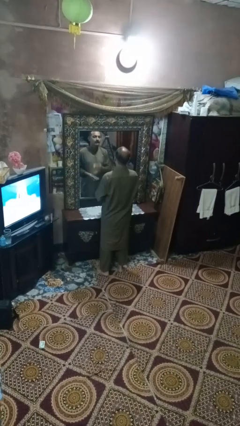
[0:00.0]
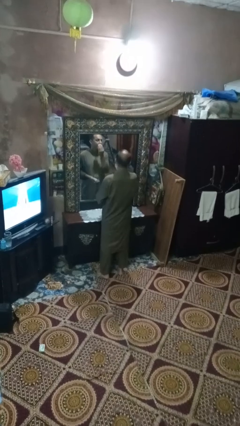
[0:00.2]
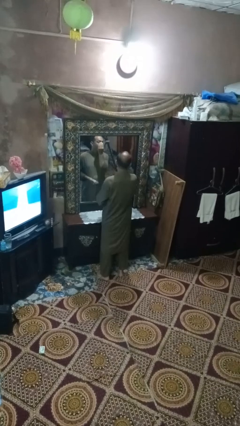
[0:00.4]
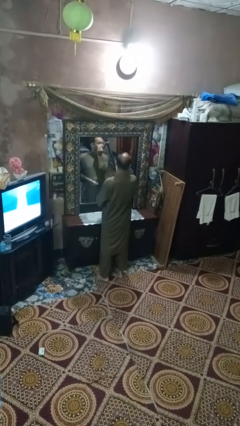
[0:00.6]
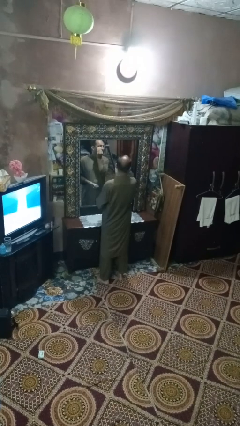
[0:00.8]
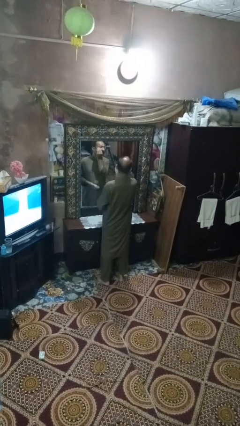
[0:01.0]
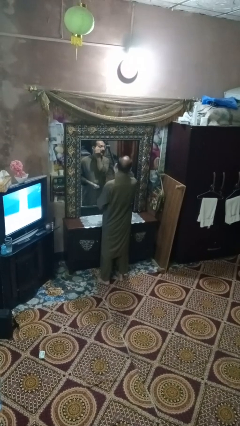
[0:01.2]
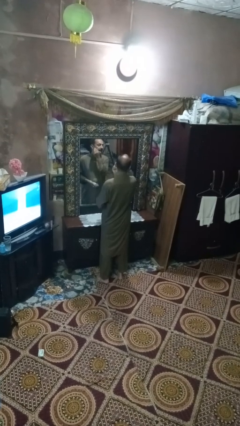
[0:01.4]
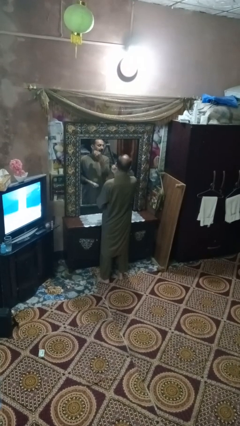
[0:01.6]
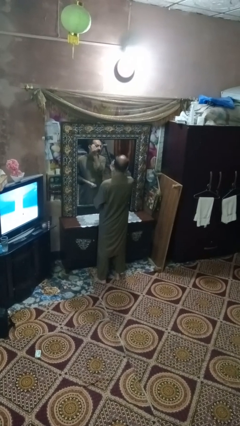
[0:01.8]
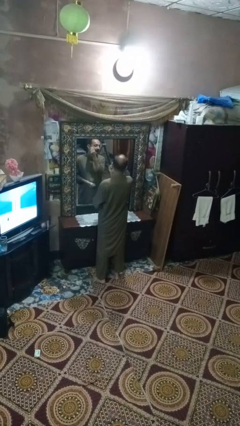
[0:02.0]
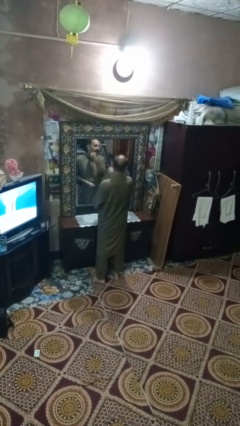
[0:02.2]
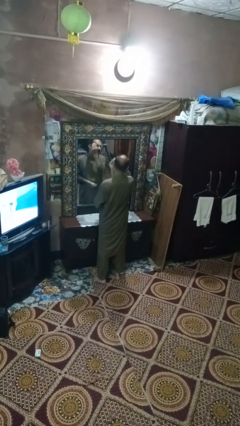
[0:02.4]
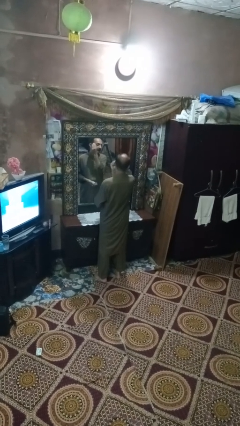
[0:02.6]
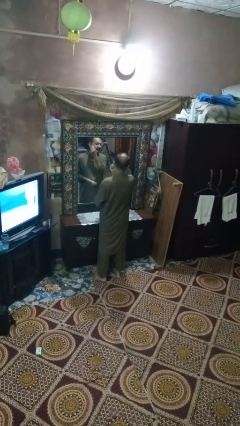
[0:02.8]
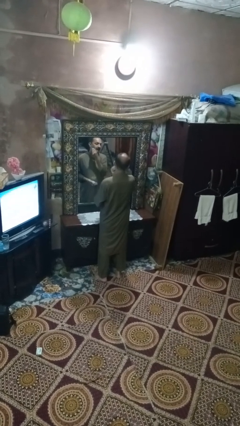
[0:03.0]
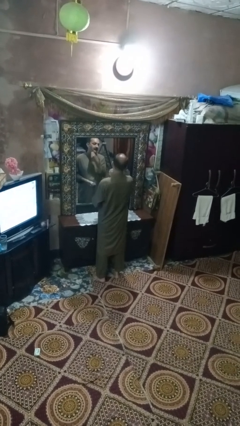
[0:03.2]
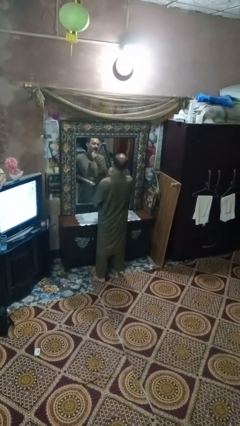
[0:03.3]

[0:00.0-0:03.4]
person applies foundation makeup

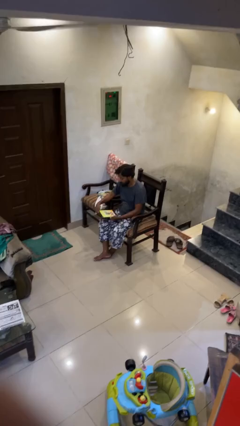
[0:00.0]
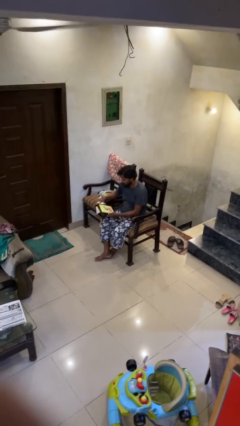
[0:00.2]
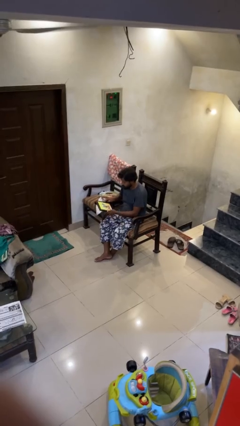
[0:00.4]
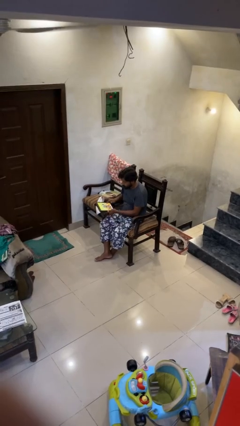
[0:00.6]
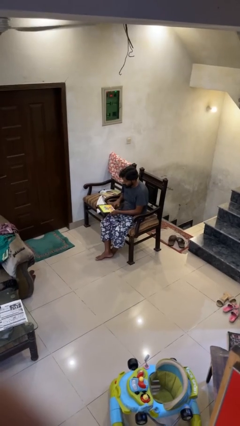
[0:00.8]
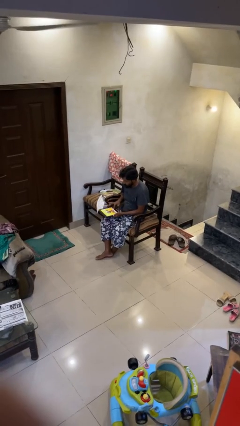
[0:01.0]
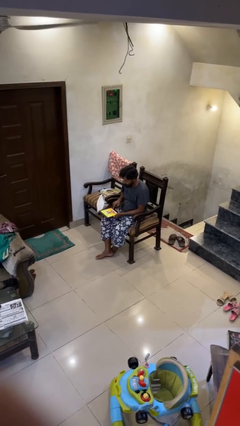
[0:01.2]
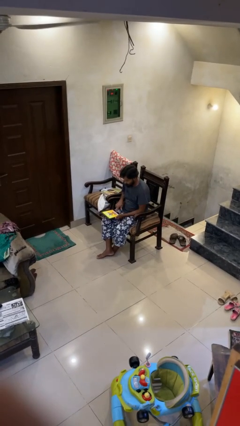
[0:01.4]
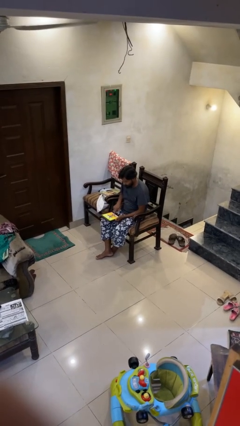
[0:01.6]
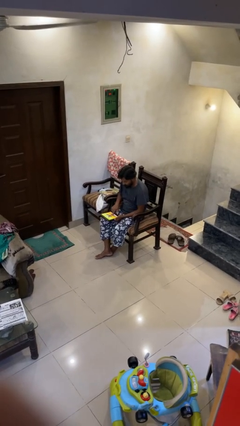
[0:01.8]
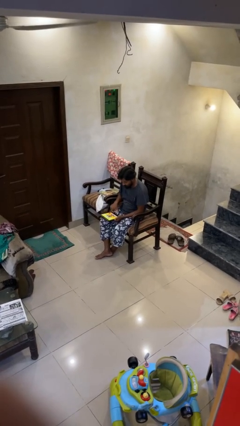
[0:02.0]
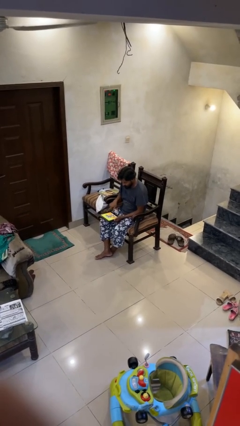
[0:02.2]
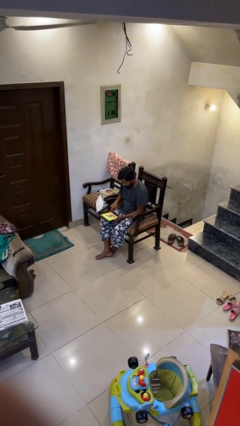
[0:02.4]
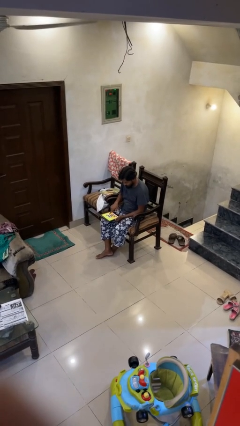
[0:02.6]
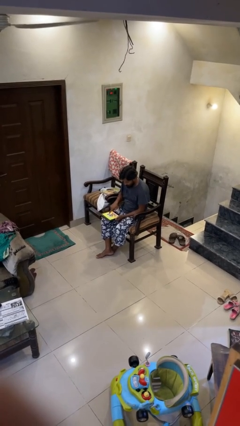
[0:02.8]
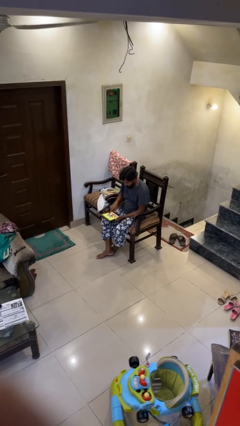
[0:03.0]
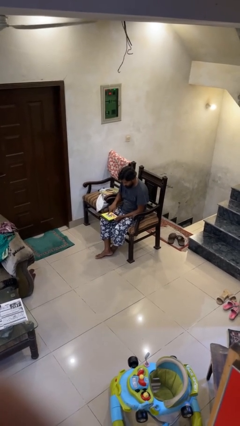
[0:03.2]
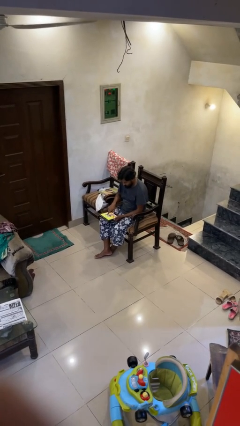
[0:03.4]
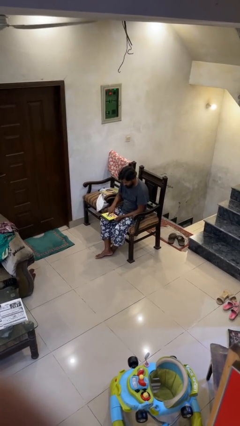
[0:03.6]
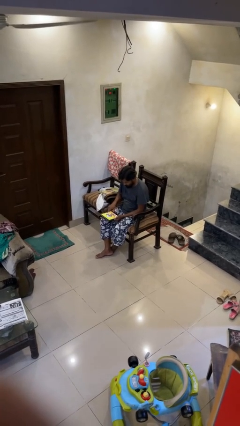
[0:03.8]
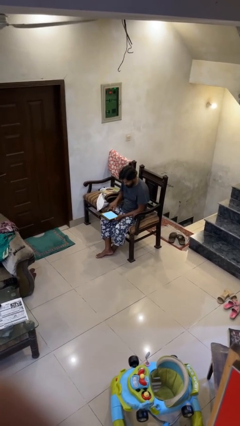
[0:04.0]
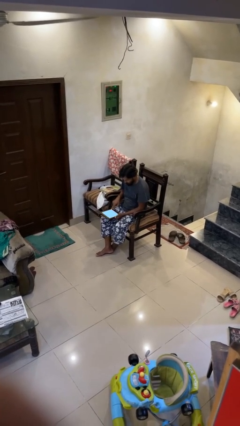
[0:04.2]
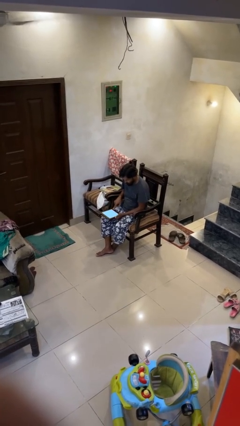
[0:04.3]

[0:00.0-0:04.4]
person interacts with tablet

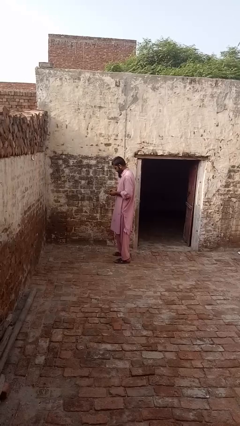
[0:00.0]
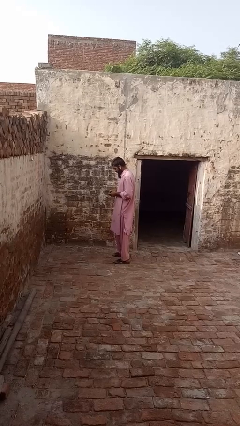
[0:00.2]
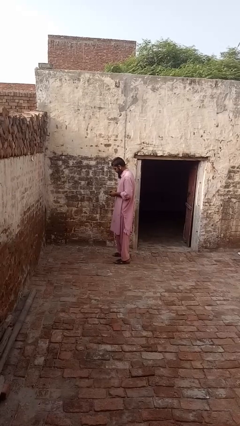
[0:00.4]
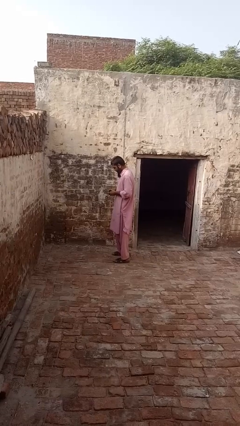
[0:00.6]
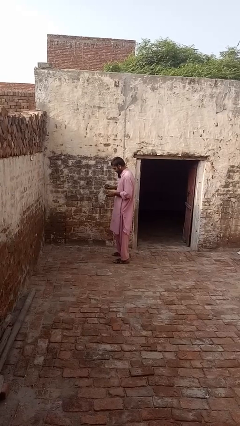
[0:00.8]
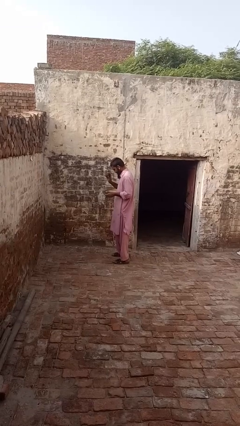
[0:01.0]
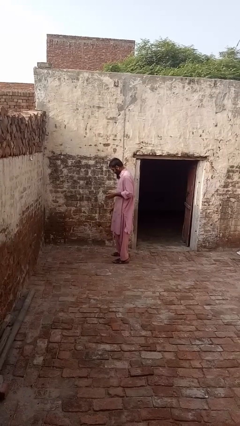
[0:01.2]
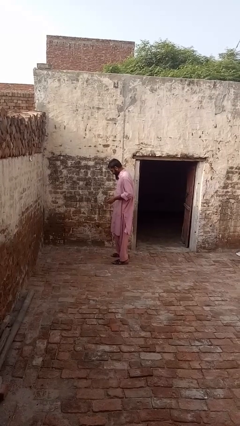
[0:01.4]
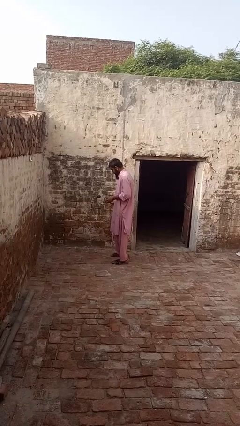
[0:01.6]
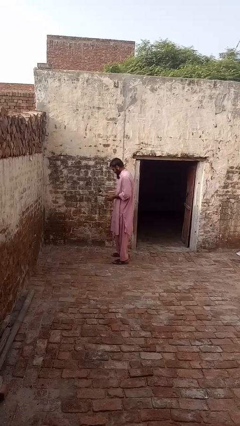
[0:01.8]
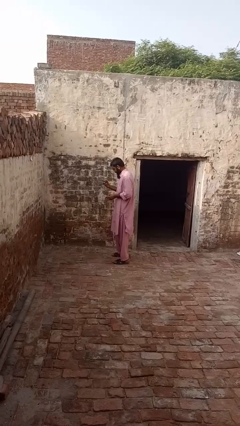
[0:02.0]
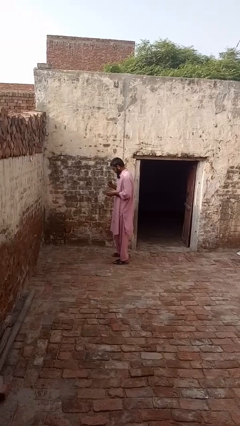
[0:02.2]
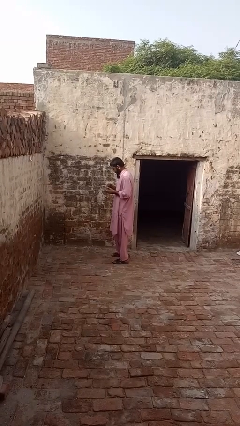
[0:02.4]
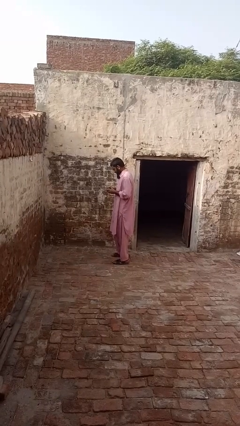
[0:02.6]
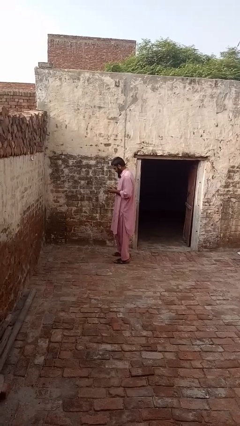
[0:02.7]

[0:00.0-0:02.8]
person bounces ball on floor

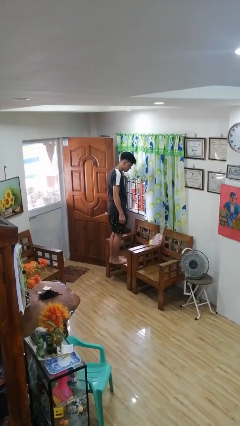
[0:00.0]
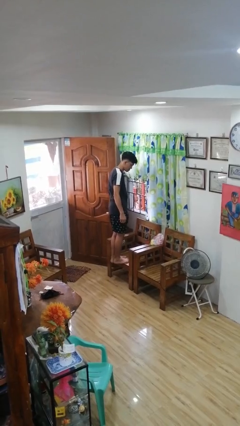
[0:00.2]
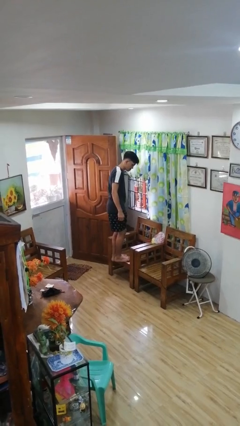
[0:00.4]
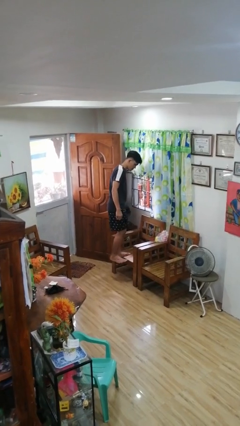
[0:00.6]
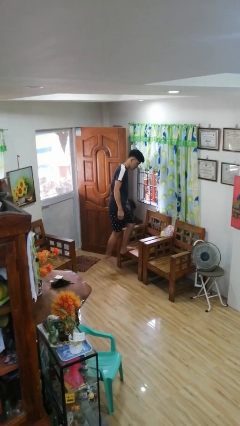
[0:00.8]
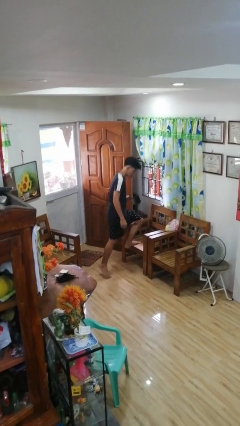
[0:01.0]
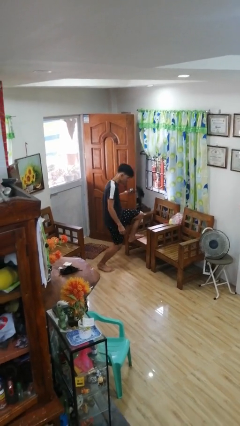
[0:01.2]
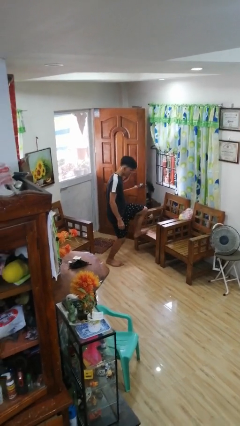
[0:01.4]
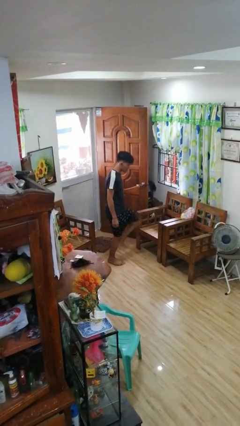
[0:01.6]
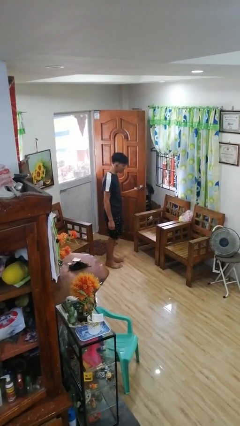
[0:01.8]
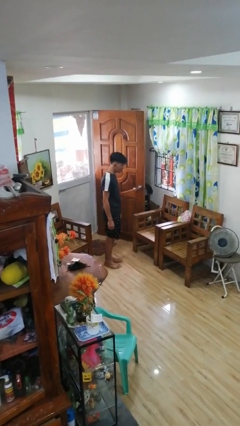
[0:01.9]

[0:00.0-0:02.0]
person climbs off chair

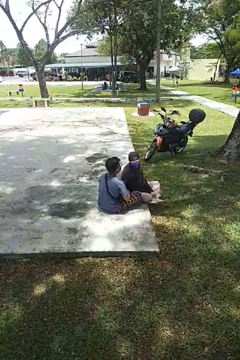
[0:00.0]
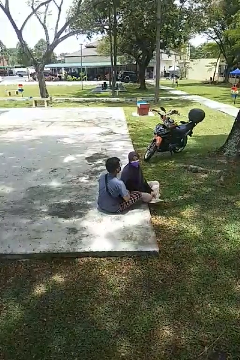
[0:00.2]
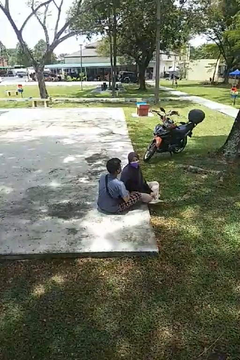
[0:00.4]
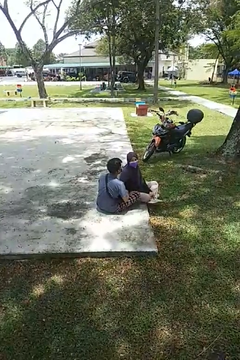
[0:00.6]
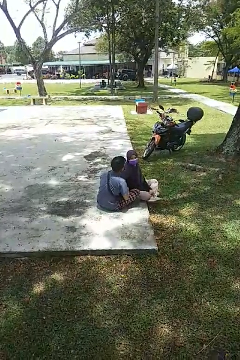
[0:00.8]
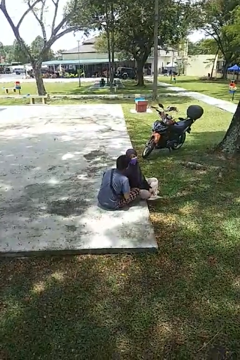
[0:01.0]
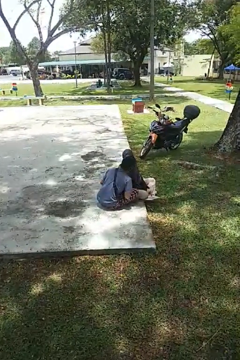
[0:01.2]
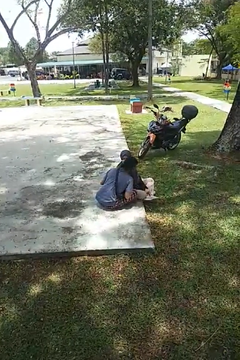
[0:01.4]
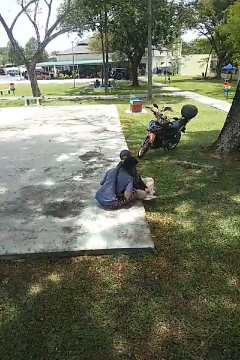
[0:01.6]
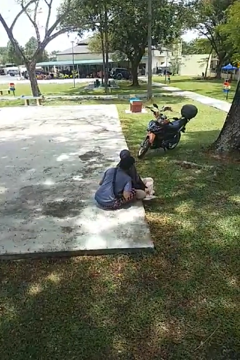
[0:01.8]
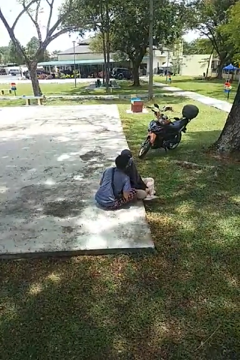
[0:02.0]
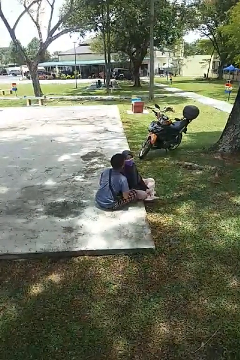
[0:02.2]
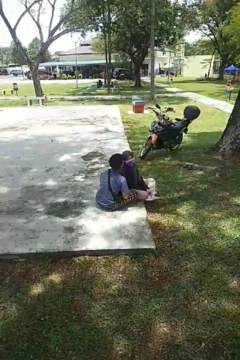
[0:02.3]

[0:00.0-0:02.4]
person kisses cheek of person

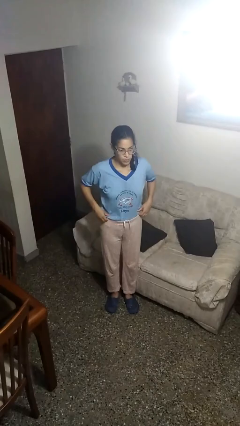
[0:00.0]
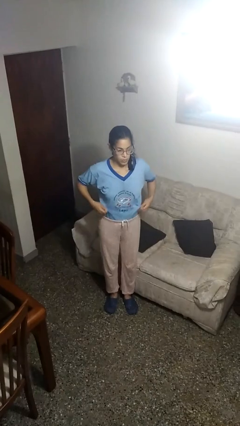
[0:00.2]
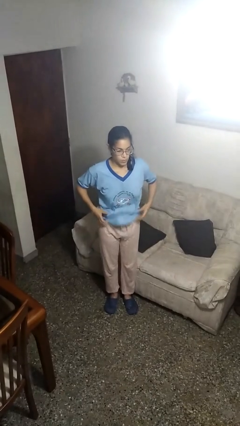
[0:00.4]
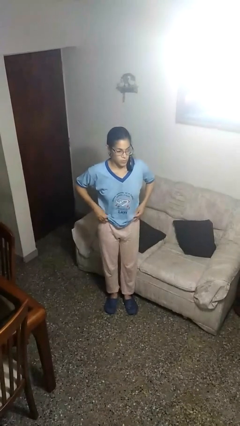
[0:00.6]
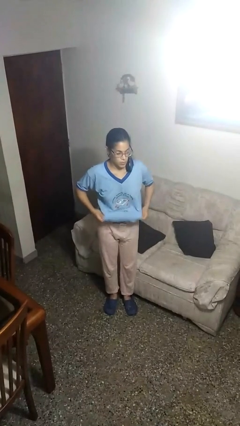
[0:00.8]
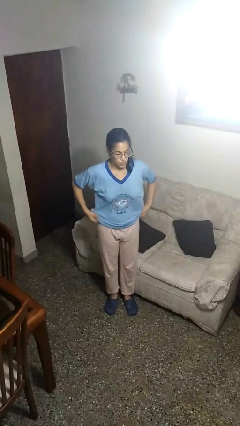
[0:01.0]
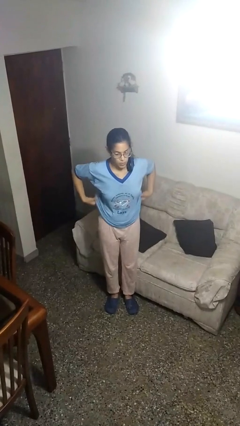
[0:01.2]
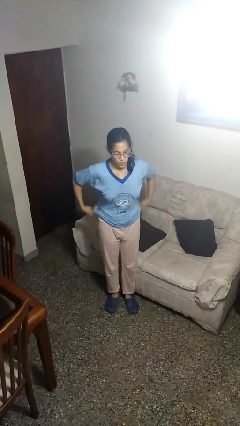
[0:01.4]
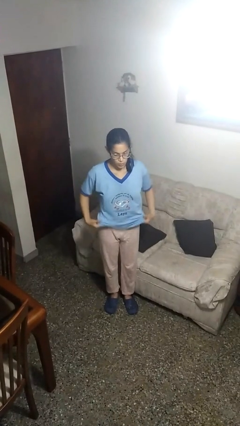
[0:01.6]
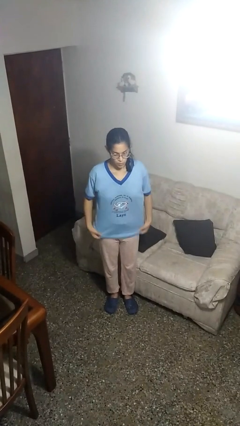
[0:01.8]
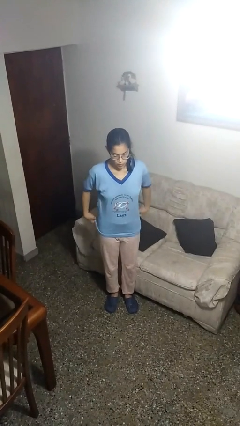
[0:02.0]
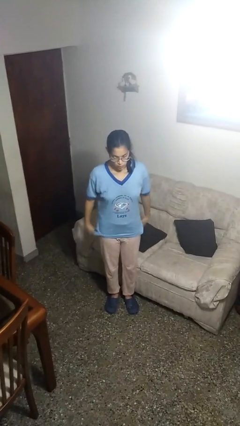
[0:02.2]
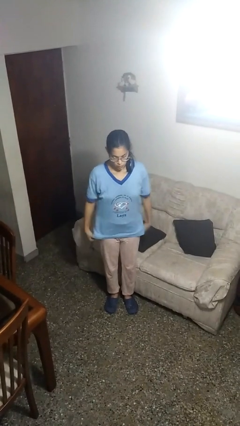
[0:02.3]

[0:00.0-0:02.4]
person untucks shirt
